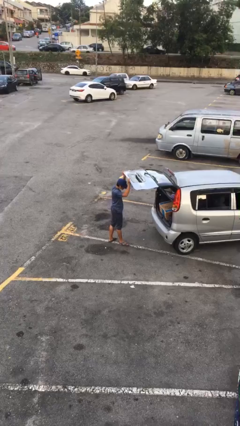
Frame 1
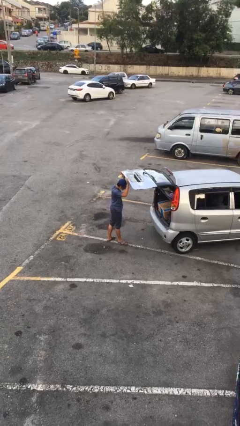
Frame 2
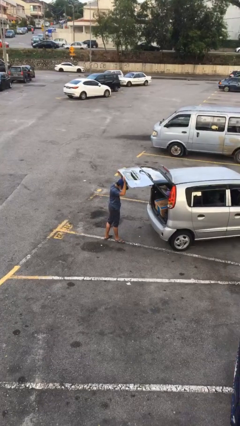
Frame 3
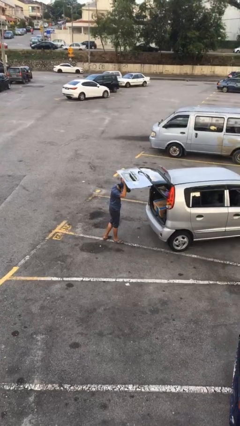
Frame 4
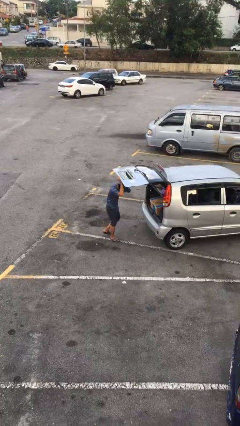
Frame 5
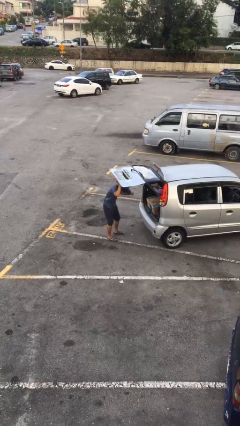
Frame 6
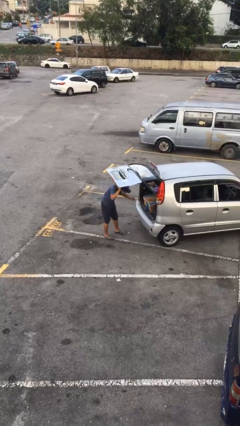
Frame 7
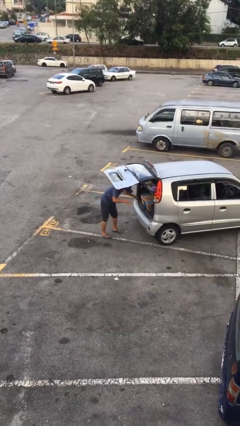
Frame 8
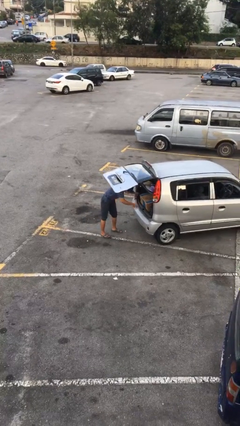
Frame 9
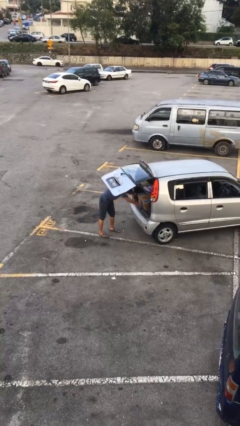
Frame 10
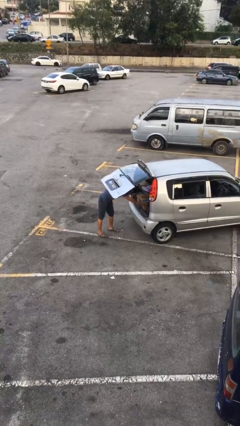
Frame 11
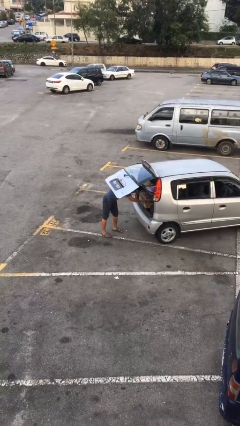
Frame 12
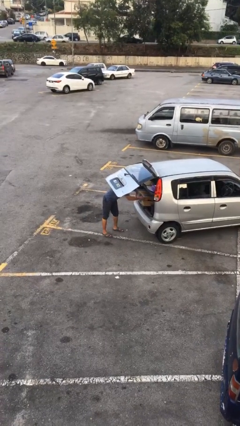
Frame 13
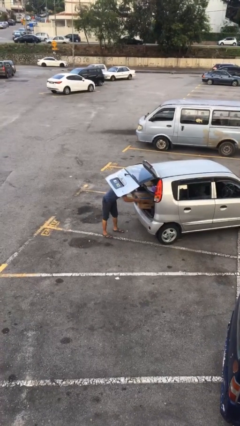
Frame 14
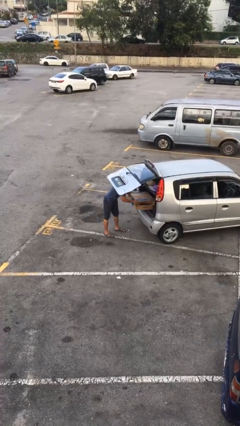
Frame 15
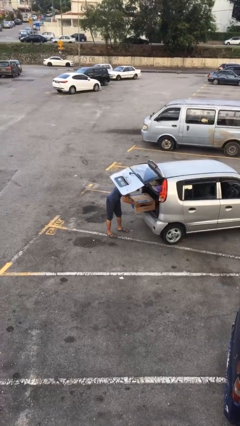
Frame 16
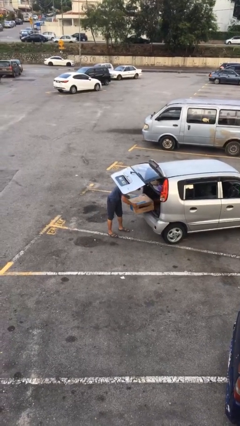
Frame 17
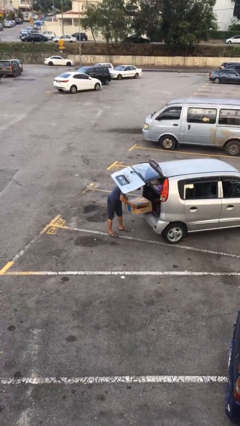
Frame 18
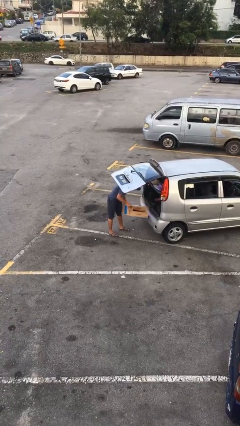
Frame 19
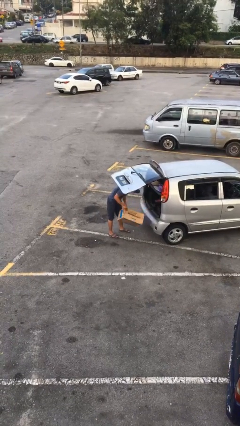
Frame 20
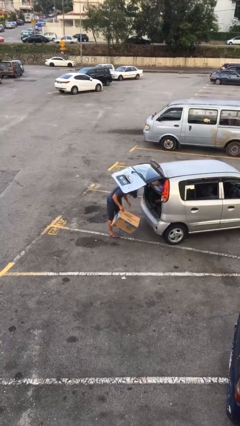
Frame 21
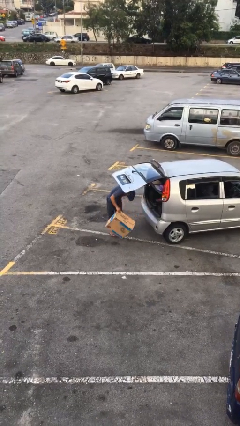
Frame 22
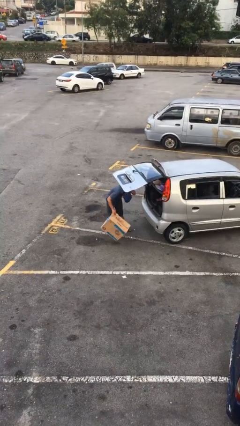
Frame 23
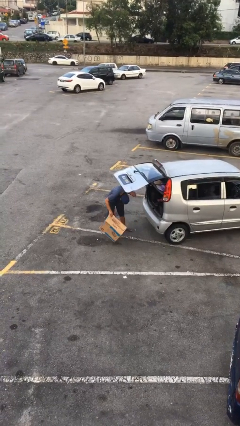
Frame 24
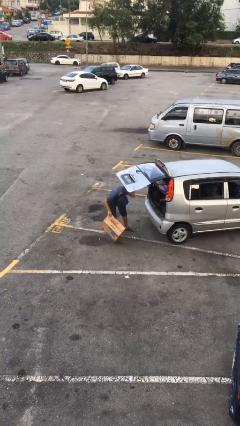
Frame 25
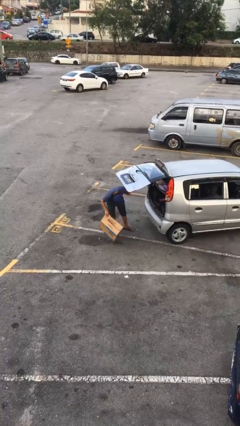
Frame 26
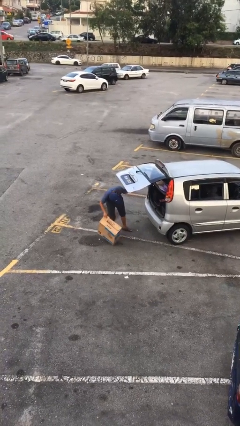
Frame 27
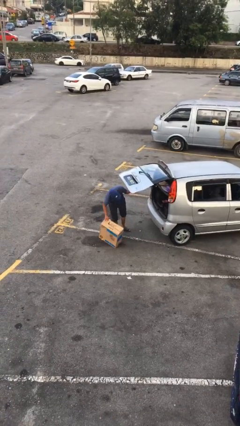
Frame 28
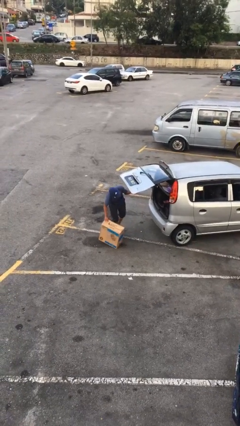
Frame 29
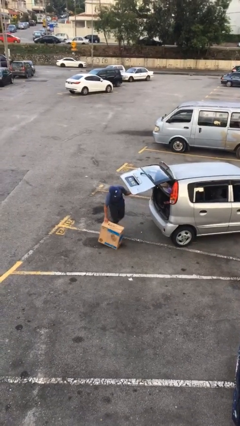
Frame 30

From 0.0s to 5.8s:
person unloads car

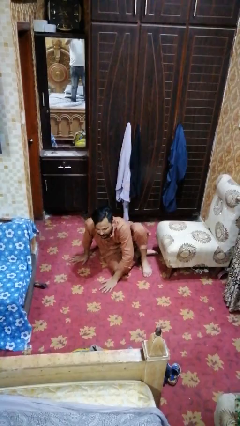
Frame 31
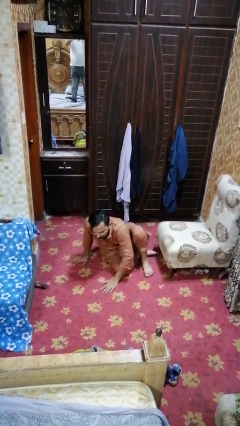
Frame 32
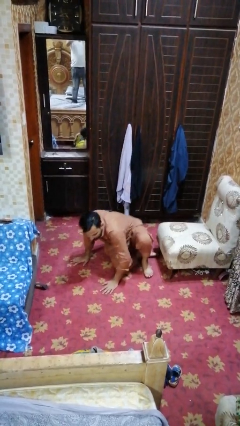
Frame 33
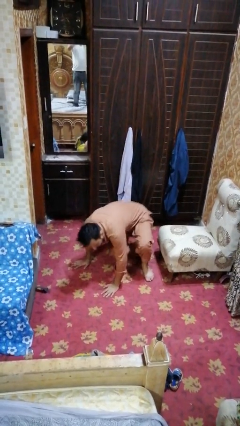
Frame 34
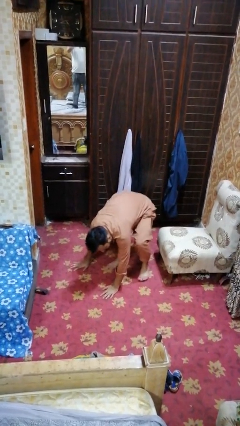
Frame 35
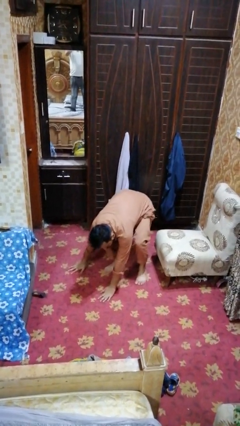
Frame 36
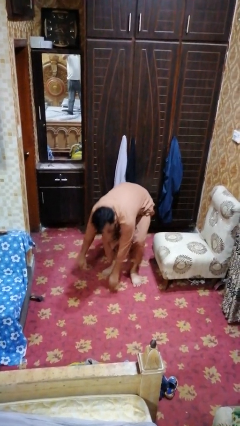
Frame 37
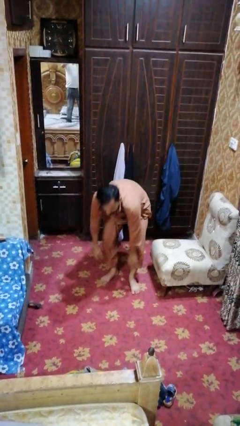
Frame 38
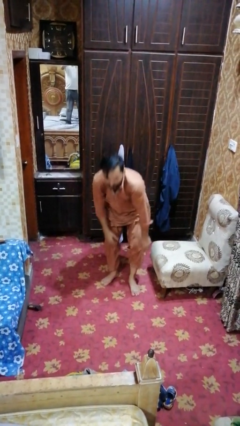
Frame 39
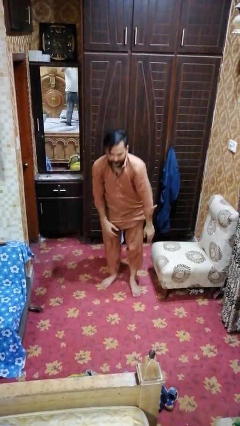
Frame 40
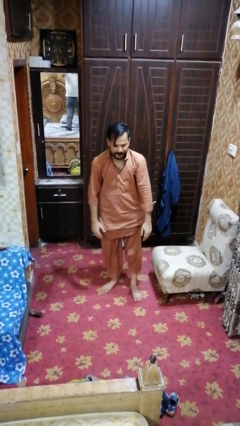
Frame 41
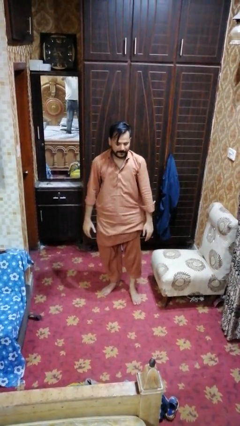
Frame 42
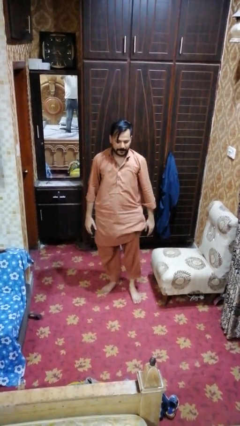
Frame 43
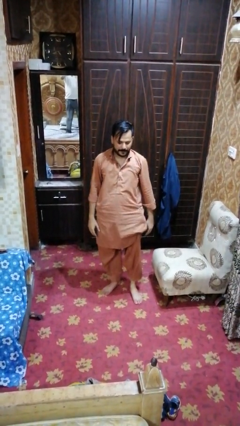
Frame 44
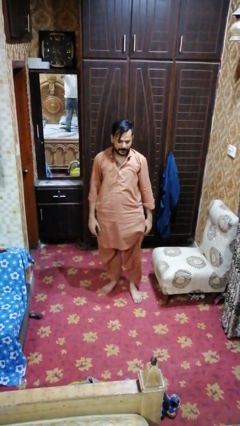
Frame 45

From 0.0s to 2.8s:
person stands up from floor

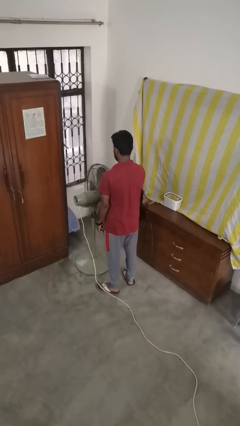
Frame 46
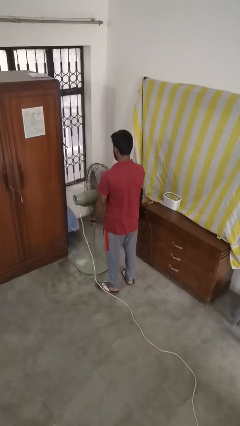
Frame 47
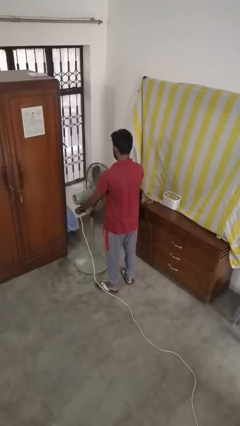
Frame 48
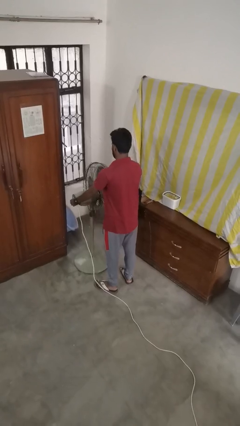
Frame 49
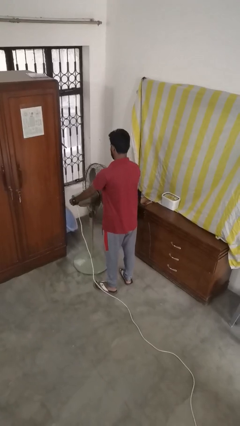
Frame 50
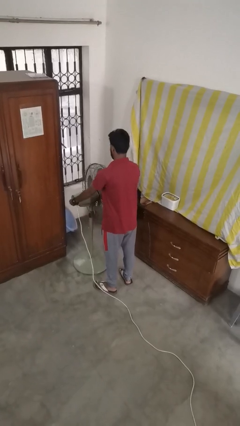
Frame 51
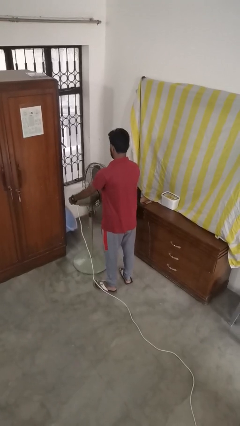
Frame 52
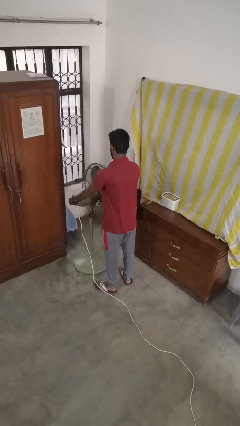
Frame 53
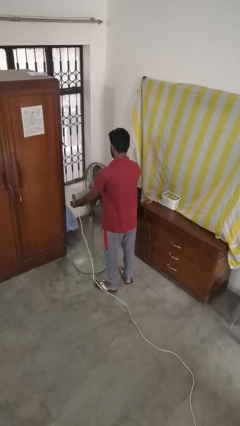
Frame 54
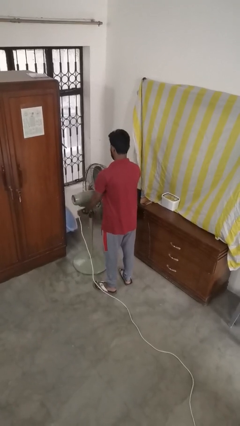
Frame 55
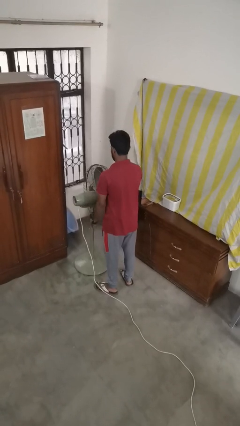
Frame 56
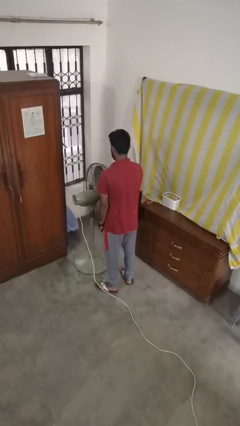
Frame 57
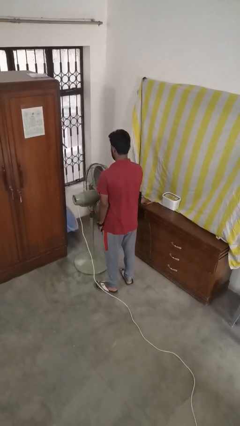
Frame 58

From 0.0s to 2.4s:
person turns off fan

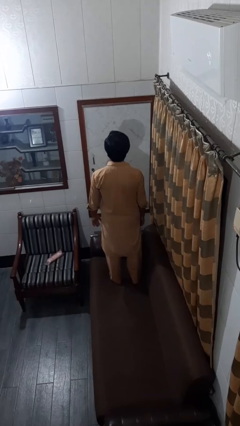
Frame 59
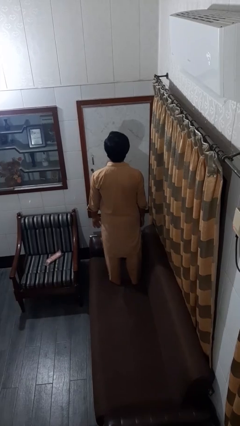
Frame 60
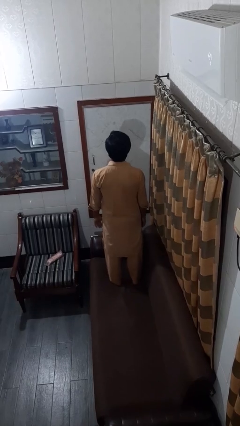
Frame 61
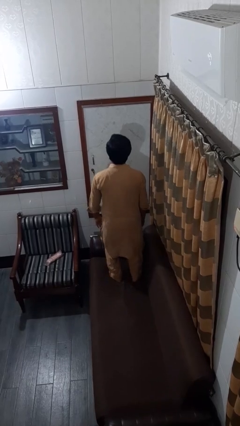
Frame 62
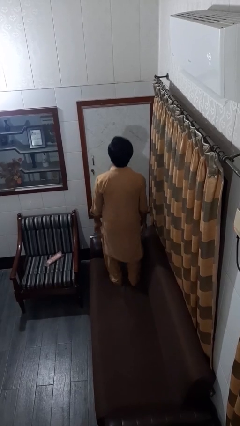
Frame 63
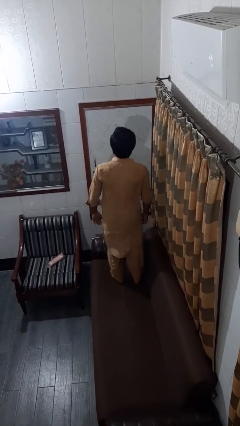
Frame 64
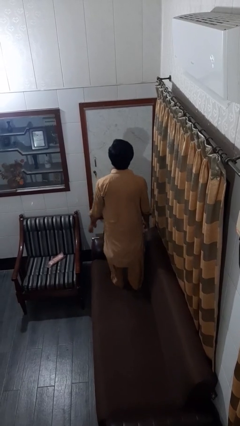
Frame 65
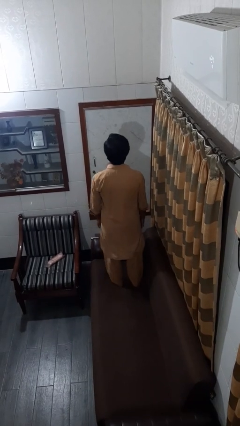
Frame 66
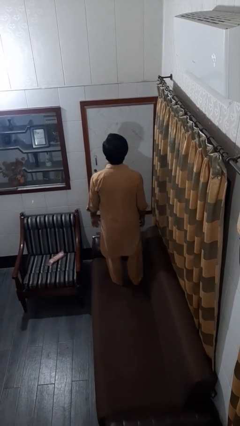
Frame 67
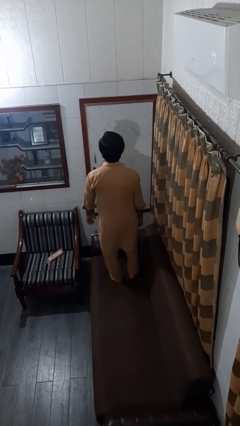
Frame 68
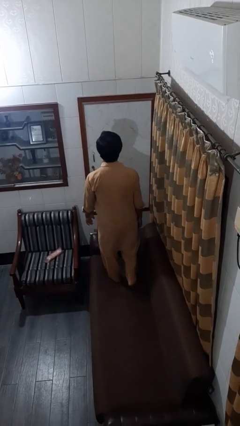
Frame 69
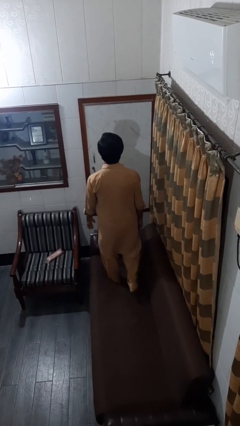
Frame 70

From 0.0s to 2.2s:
person jumps on couch

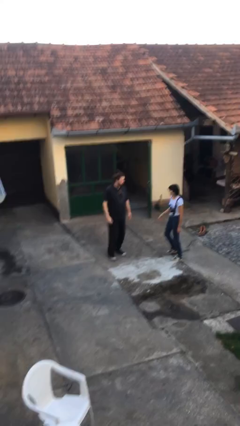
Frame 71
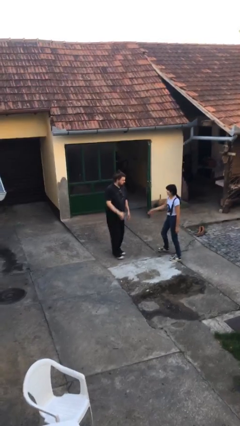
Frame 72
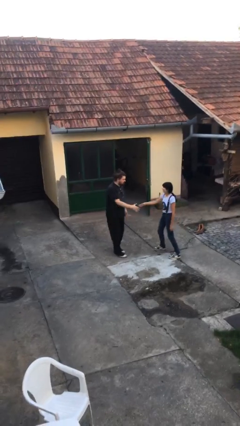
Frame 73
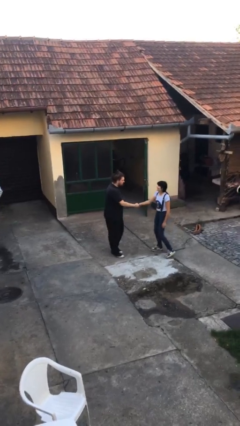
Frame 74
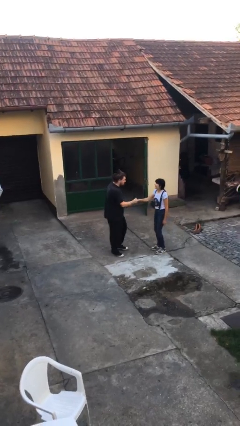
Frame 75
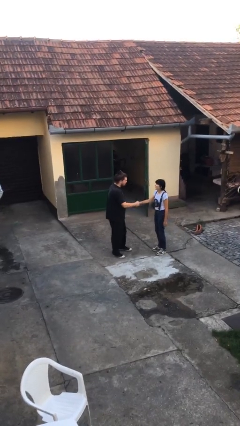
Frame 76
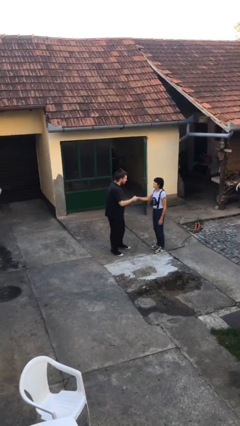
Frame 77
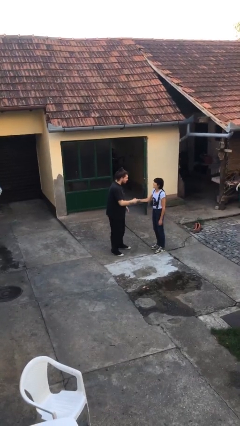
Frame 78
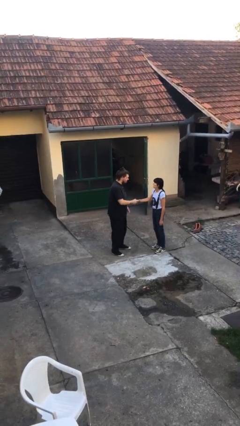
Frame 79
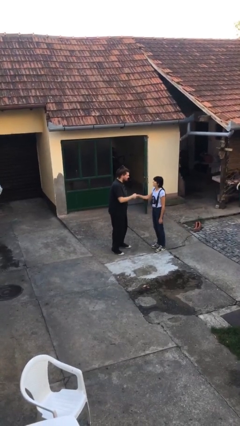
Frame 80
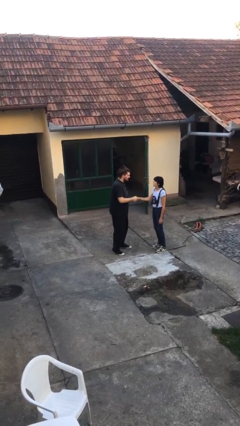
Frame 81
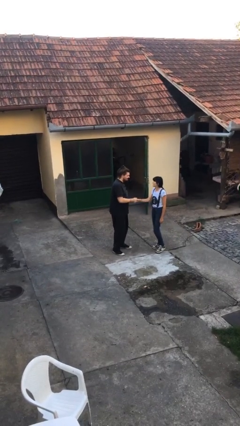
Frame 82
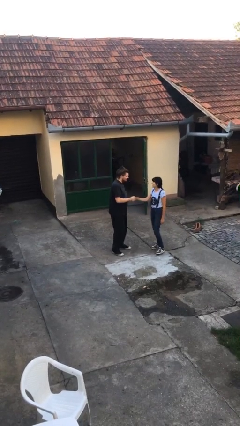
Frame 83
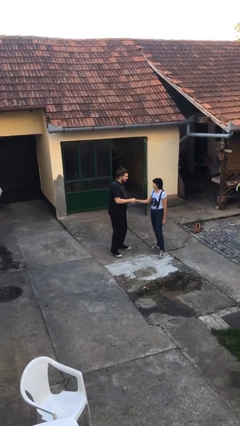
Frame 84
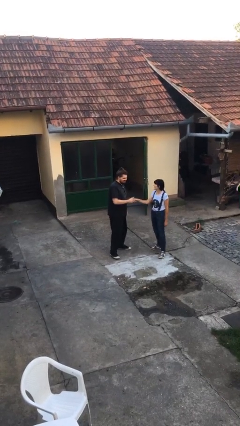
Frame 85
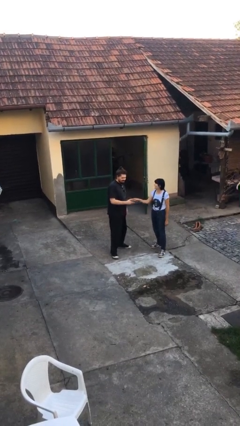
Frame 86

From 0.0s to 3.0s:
person shakes hand

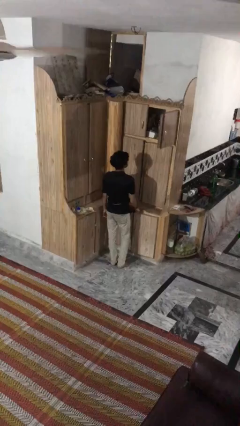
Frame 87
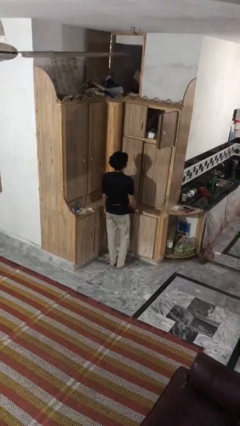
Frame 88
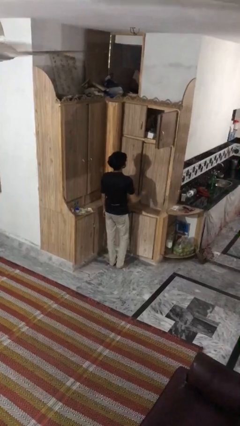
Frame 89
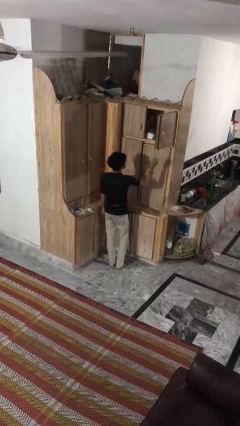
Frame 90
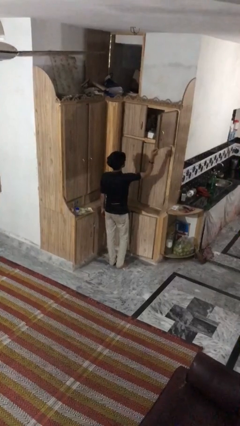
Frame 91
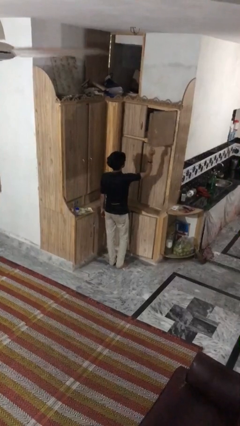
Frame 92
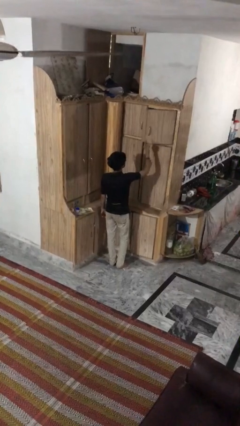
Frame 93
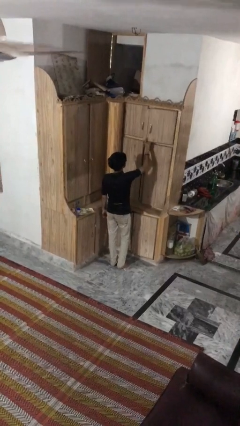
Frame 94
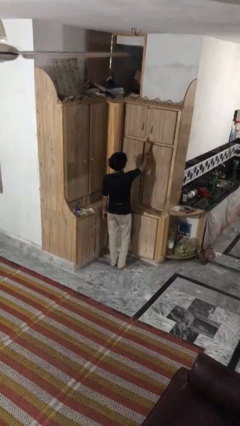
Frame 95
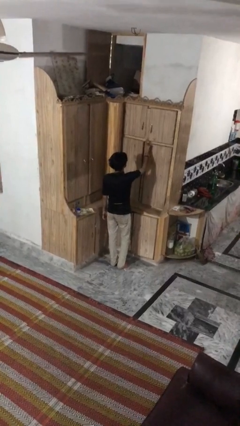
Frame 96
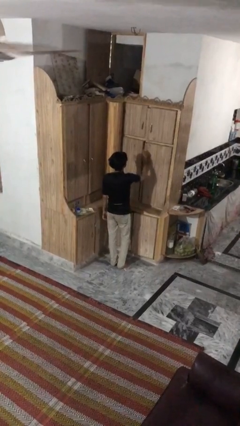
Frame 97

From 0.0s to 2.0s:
person closes cabinet
